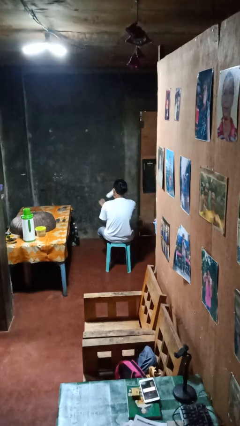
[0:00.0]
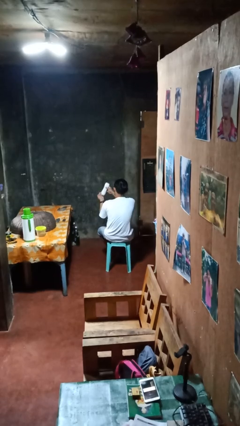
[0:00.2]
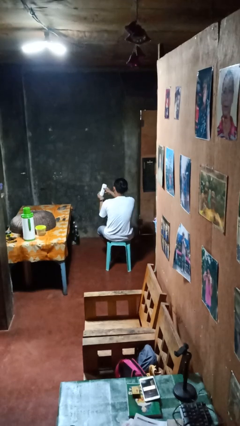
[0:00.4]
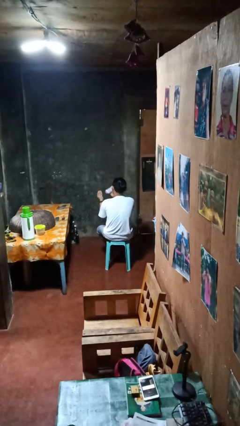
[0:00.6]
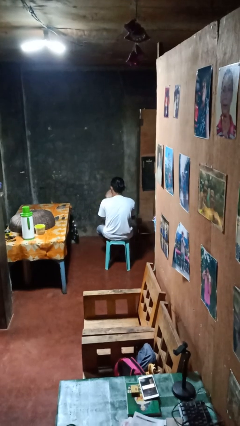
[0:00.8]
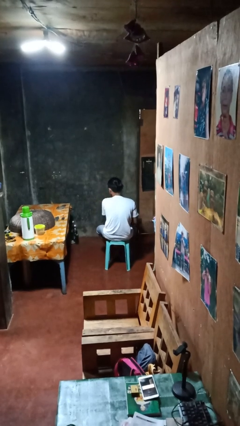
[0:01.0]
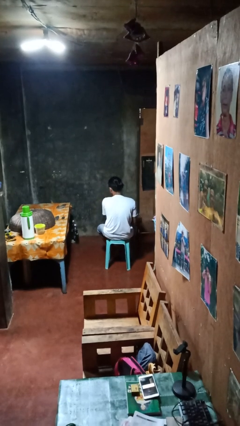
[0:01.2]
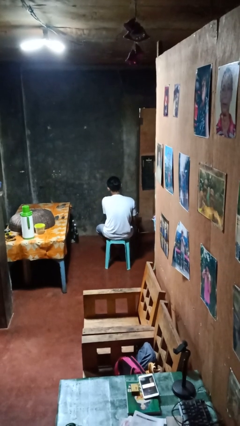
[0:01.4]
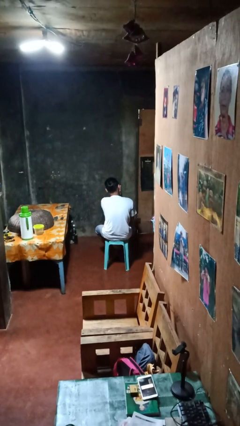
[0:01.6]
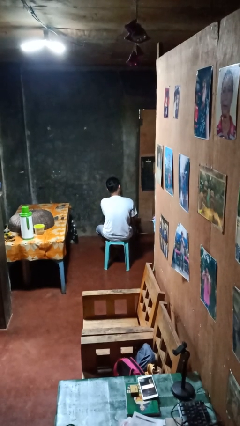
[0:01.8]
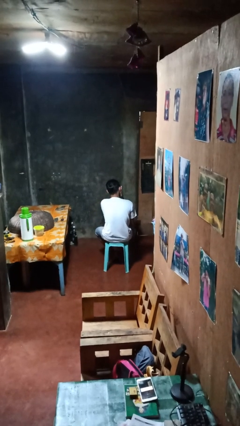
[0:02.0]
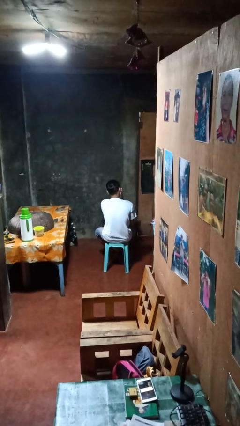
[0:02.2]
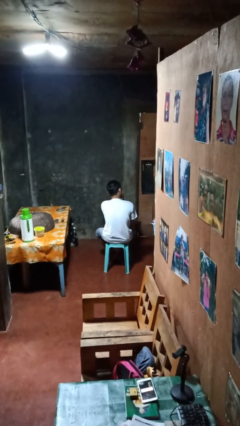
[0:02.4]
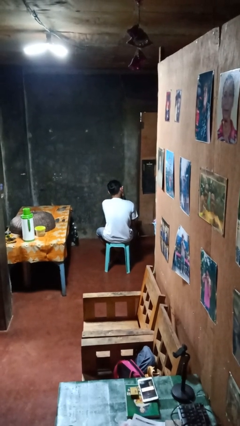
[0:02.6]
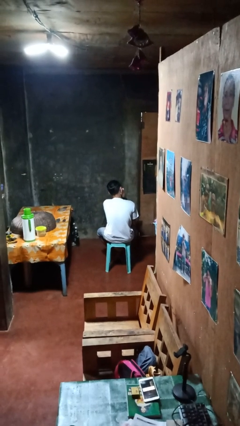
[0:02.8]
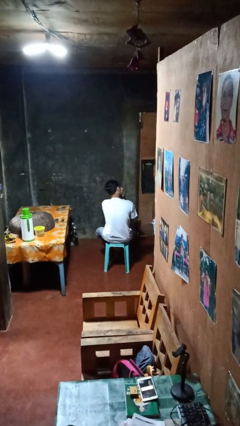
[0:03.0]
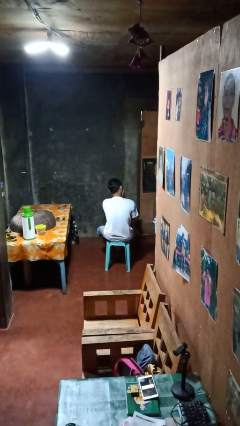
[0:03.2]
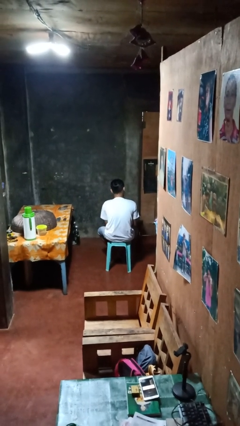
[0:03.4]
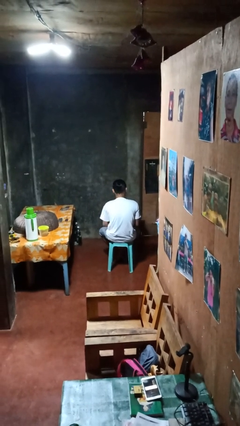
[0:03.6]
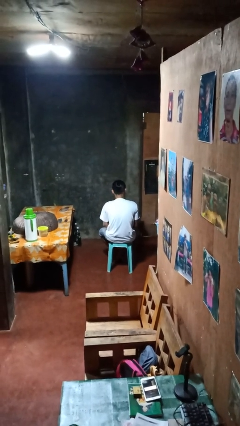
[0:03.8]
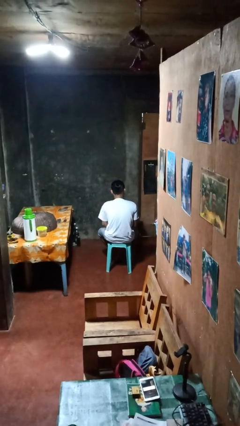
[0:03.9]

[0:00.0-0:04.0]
person applies shaving cream

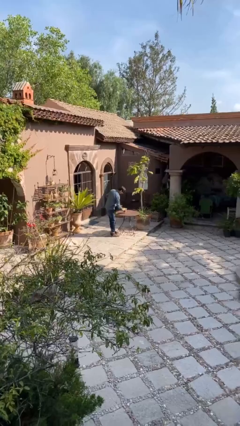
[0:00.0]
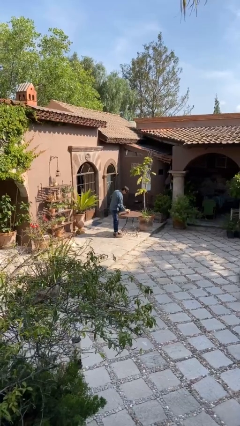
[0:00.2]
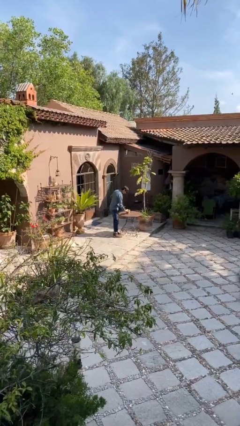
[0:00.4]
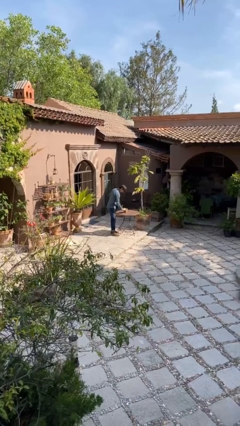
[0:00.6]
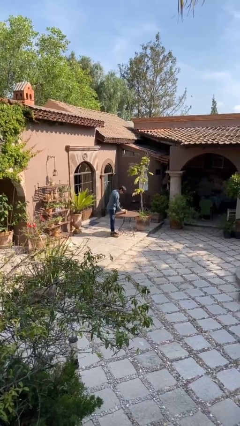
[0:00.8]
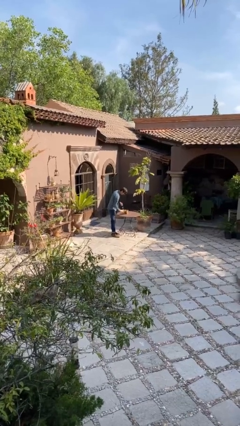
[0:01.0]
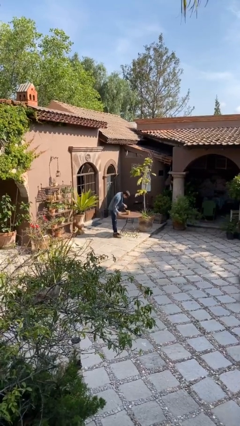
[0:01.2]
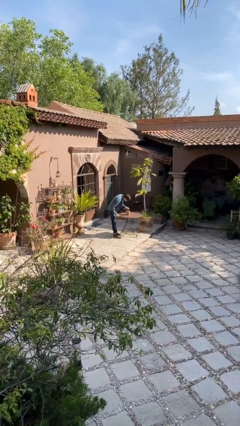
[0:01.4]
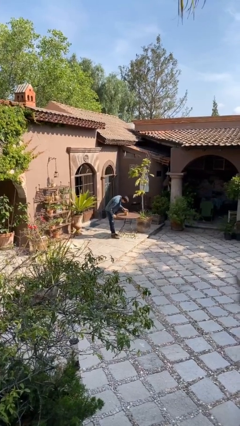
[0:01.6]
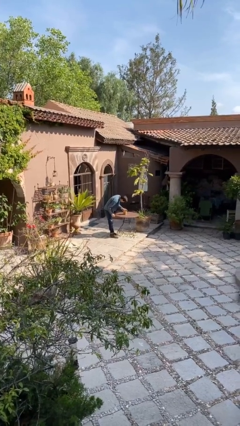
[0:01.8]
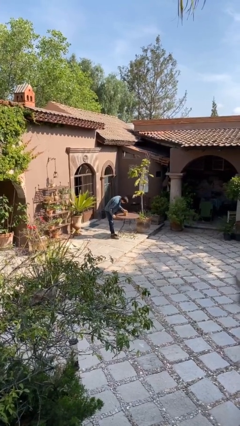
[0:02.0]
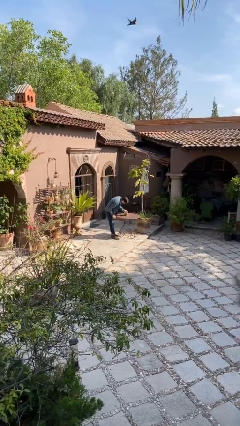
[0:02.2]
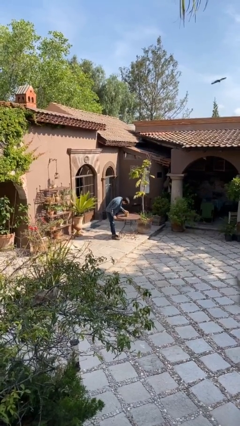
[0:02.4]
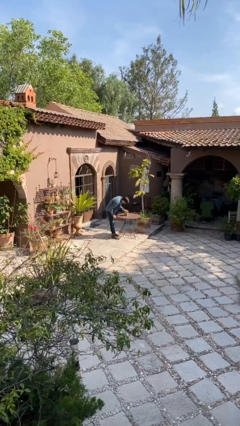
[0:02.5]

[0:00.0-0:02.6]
person puts down object on table

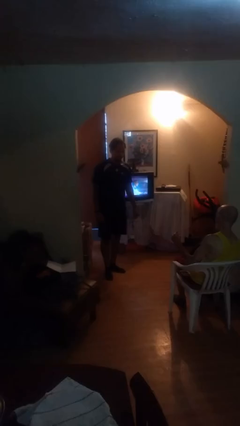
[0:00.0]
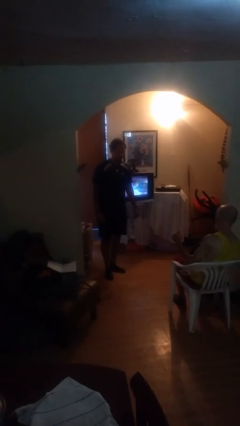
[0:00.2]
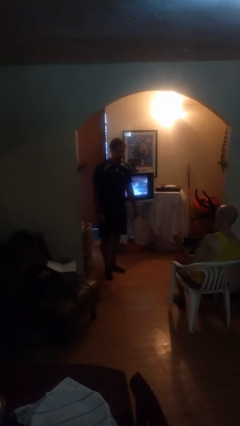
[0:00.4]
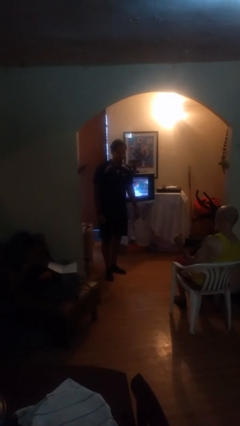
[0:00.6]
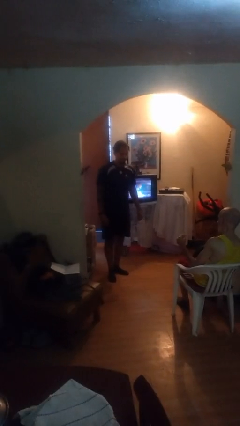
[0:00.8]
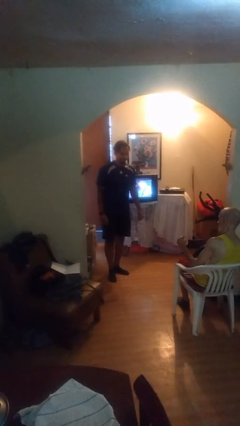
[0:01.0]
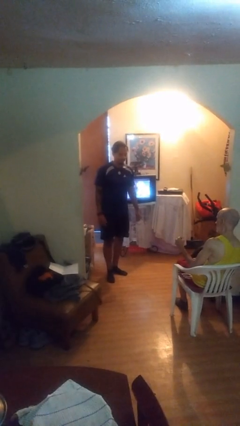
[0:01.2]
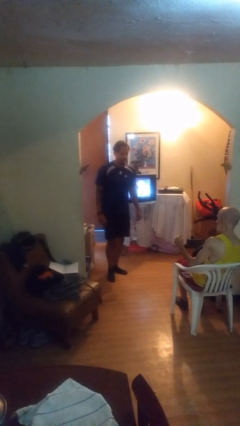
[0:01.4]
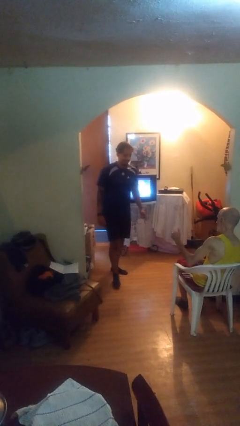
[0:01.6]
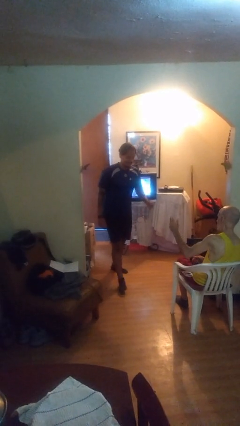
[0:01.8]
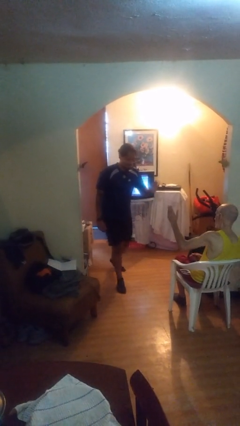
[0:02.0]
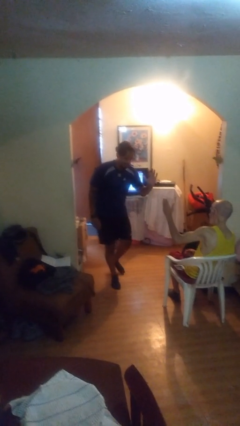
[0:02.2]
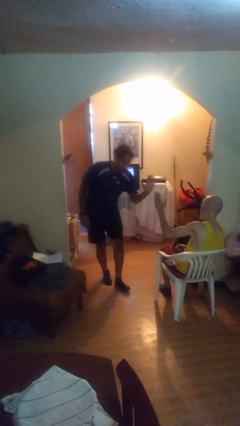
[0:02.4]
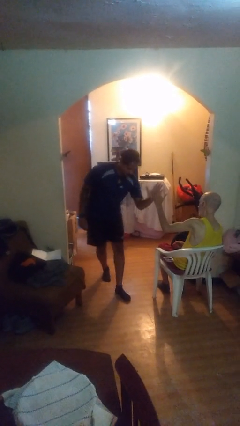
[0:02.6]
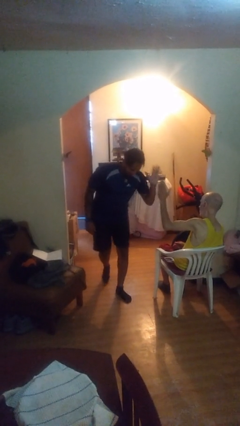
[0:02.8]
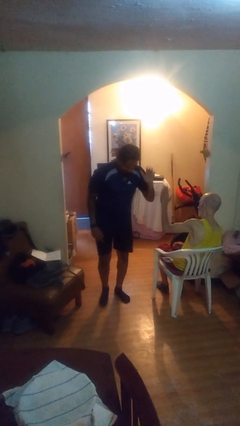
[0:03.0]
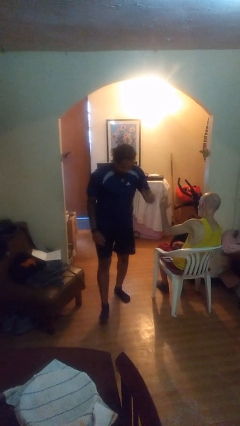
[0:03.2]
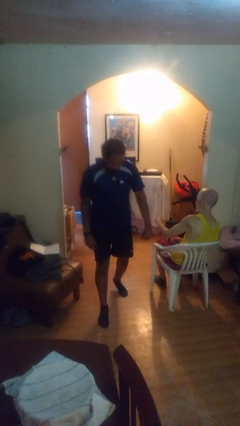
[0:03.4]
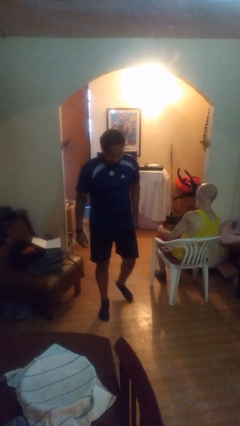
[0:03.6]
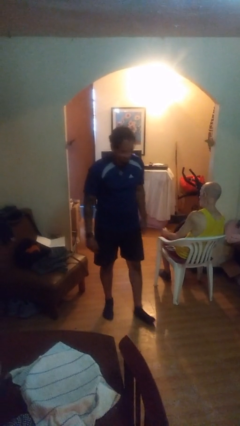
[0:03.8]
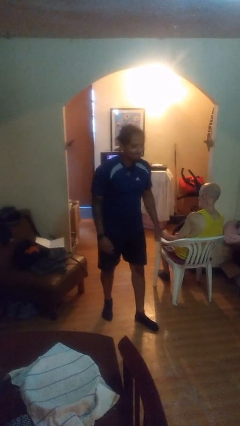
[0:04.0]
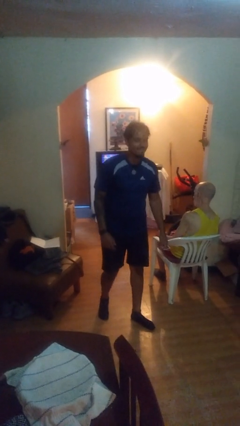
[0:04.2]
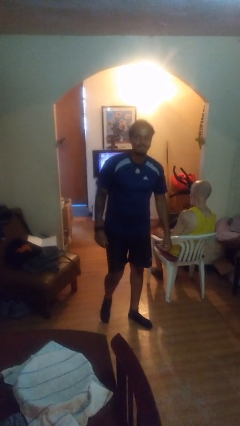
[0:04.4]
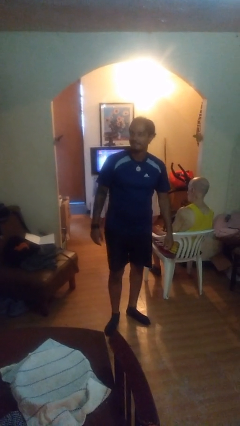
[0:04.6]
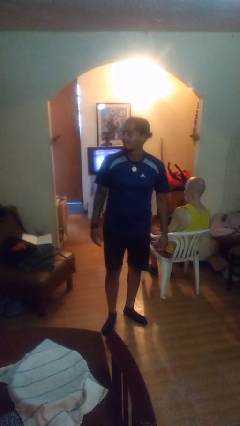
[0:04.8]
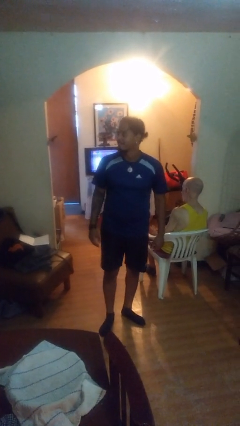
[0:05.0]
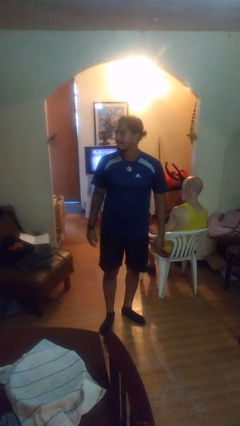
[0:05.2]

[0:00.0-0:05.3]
person highfives hand

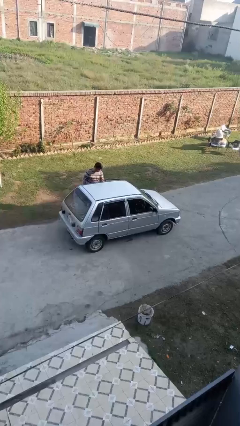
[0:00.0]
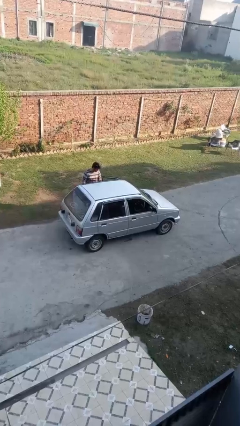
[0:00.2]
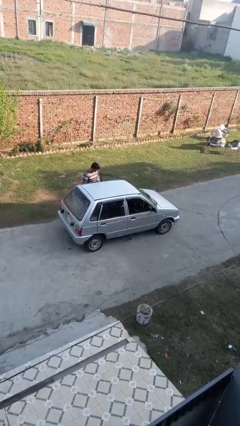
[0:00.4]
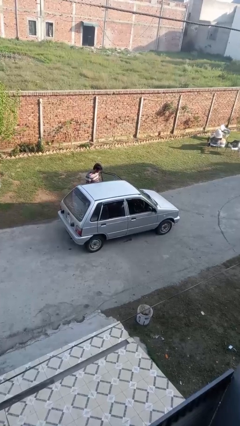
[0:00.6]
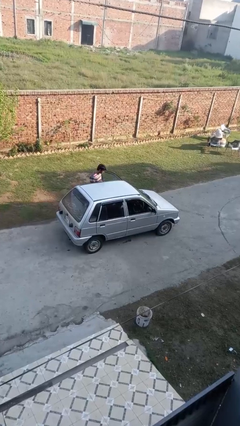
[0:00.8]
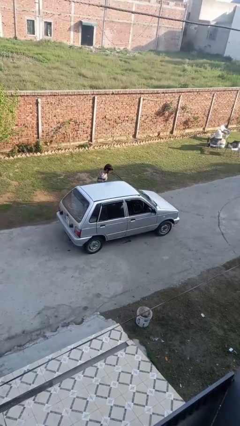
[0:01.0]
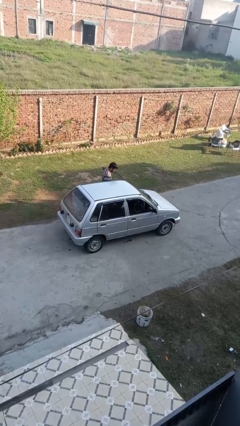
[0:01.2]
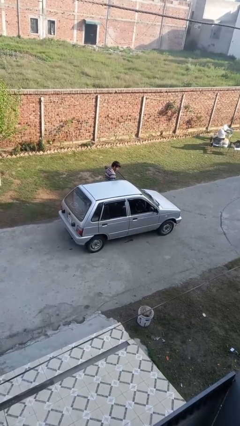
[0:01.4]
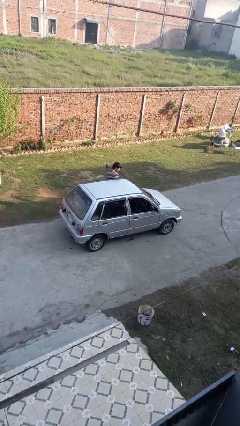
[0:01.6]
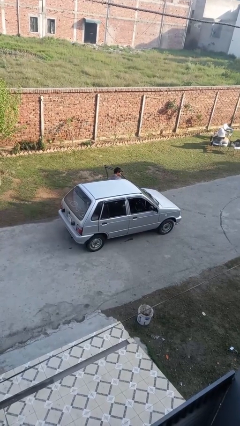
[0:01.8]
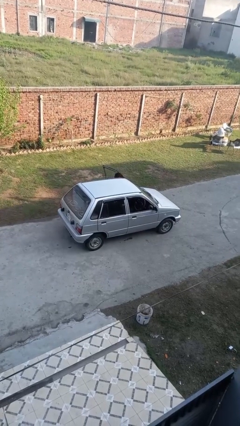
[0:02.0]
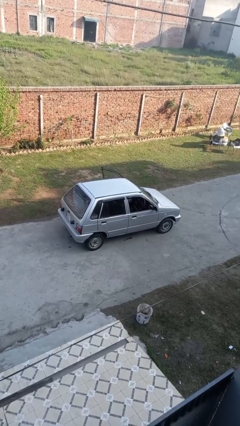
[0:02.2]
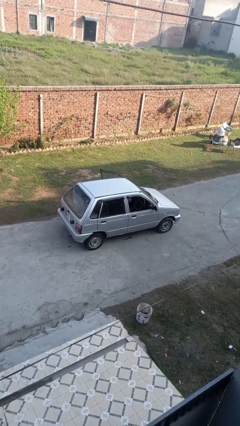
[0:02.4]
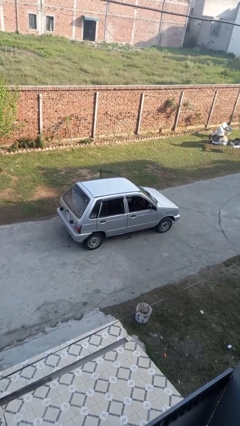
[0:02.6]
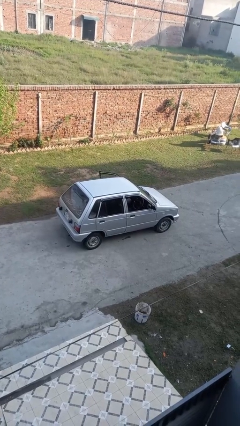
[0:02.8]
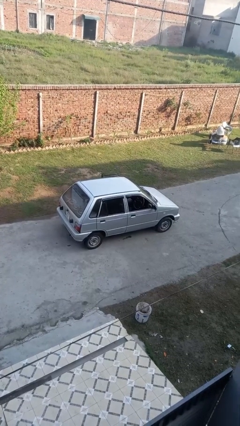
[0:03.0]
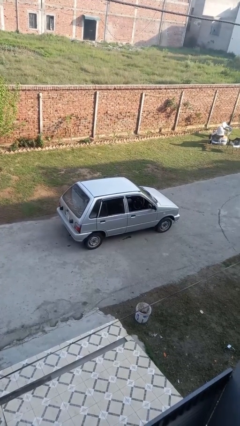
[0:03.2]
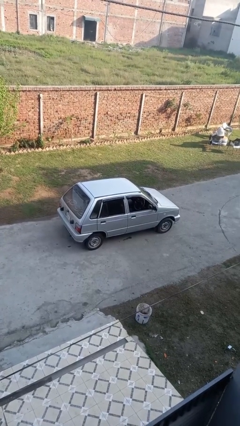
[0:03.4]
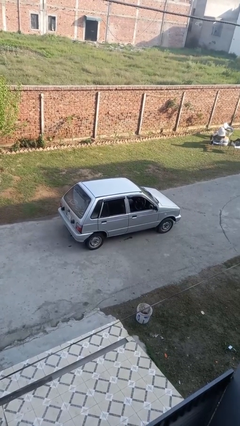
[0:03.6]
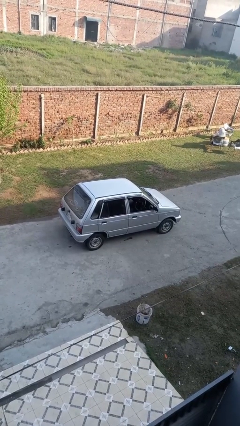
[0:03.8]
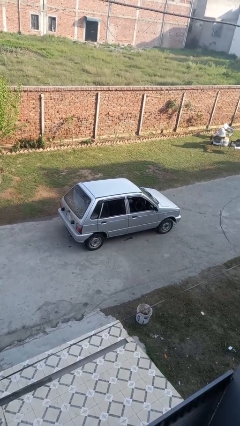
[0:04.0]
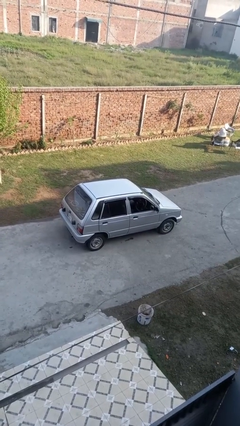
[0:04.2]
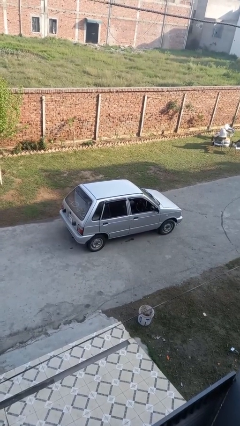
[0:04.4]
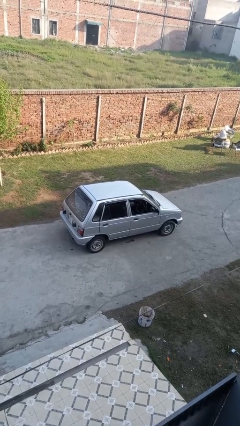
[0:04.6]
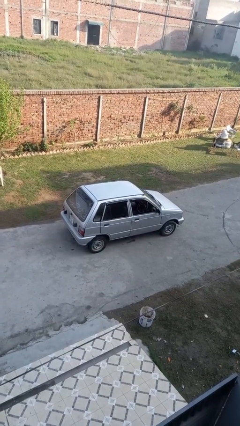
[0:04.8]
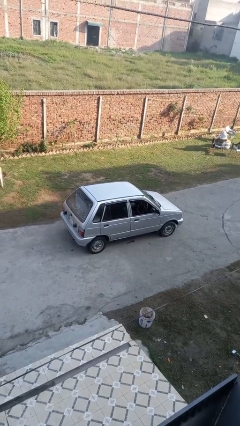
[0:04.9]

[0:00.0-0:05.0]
car picks up person

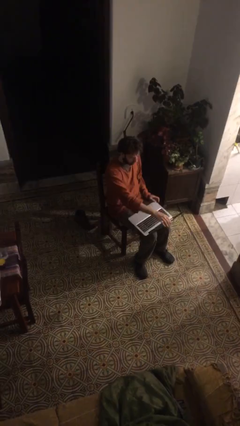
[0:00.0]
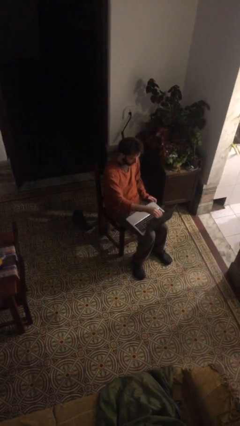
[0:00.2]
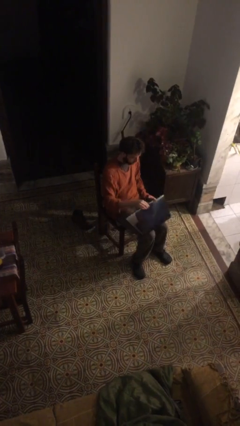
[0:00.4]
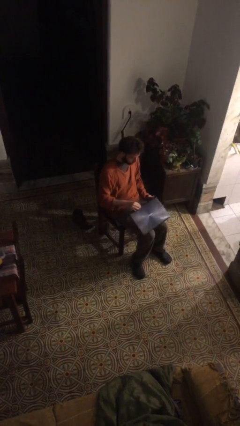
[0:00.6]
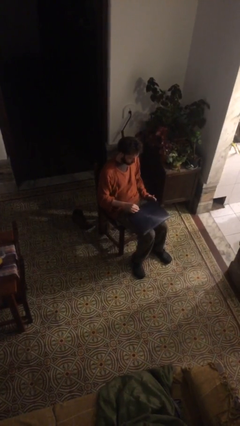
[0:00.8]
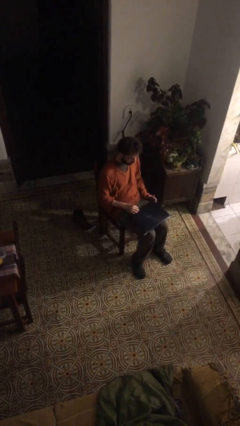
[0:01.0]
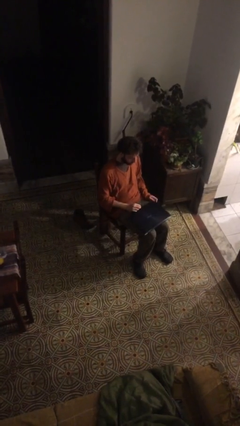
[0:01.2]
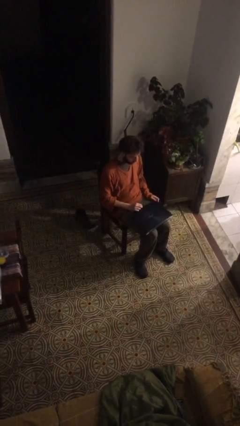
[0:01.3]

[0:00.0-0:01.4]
person closes laptop
